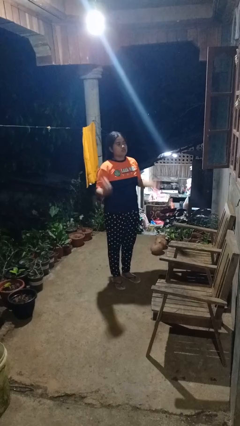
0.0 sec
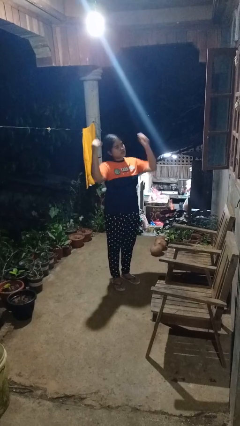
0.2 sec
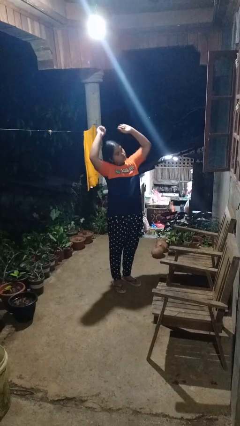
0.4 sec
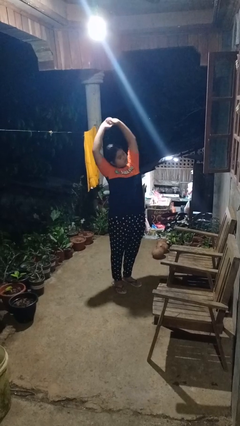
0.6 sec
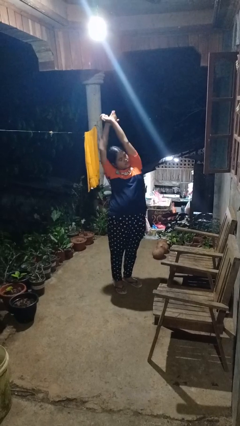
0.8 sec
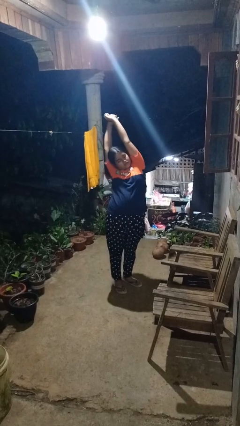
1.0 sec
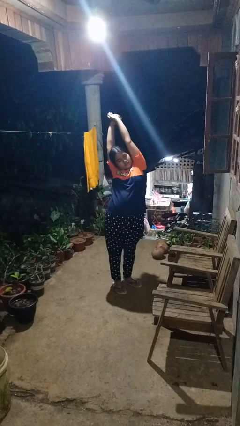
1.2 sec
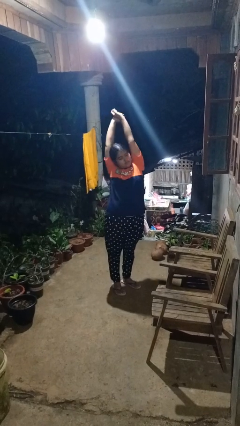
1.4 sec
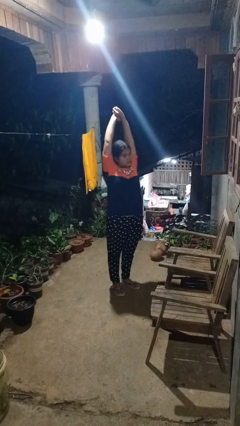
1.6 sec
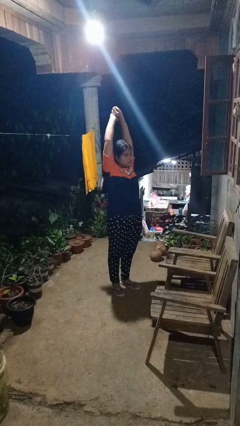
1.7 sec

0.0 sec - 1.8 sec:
person stretches arms over head

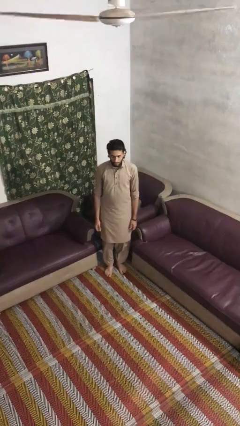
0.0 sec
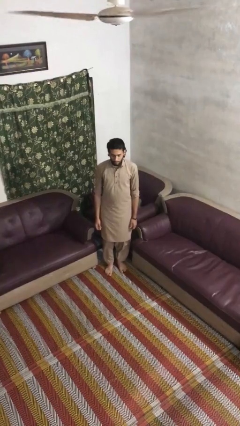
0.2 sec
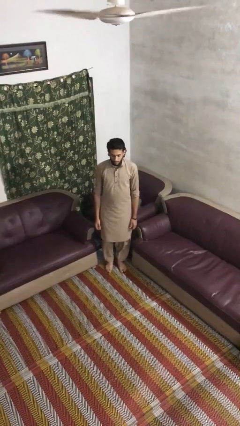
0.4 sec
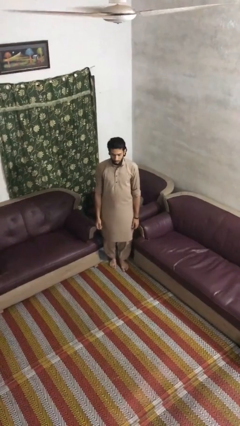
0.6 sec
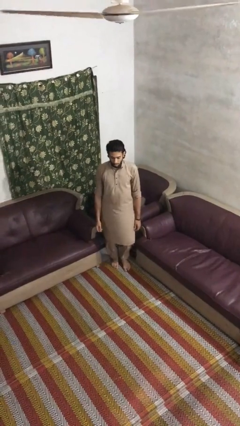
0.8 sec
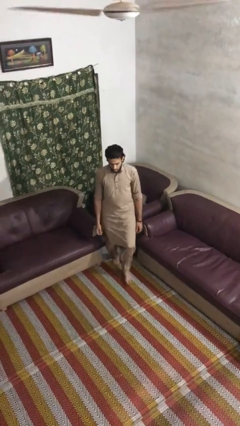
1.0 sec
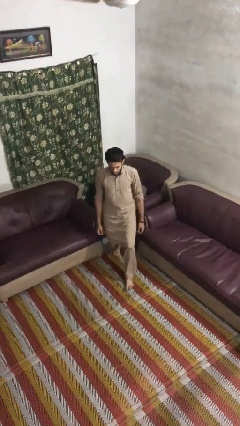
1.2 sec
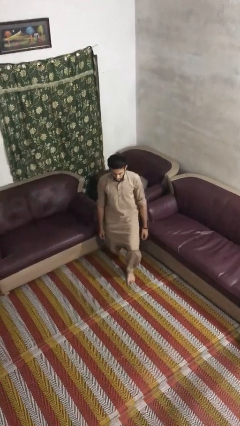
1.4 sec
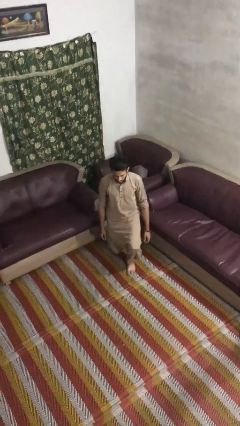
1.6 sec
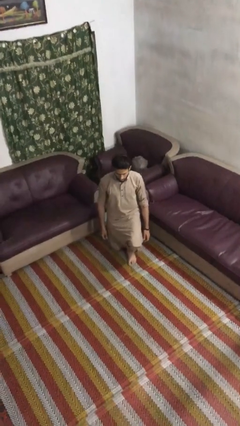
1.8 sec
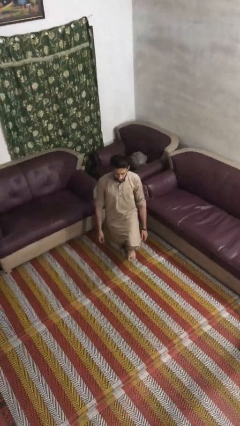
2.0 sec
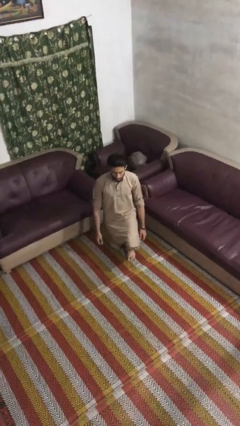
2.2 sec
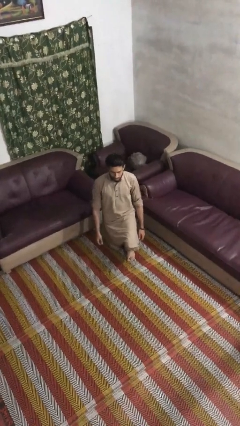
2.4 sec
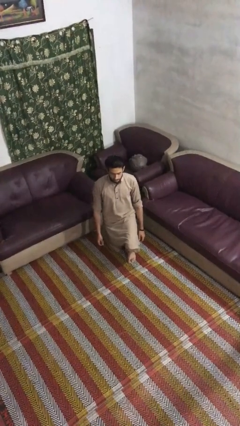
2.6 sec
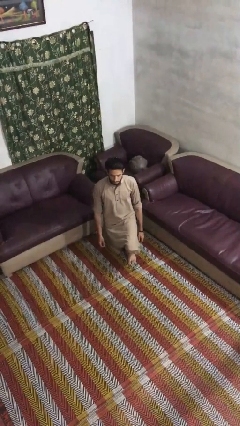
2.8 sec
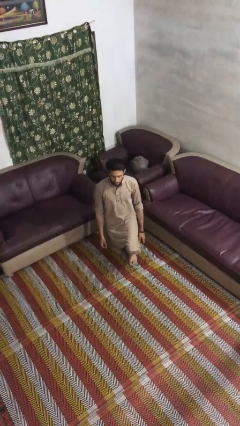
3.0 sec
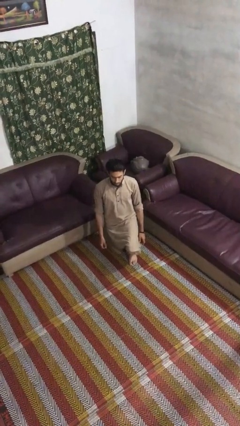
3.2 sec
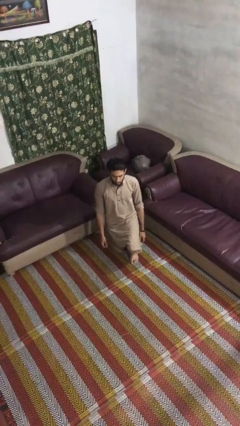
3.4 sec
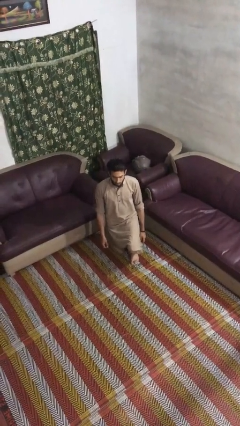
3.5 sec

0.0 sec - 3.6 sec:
person kneels

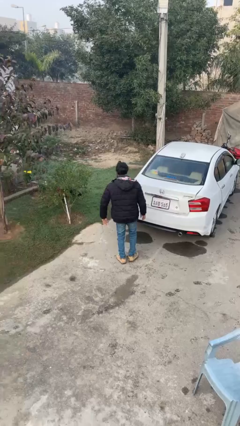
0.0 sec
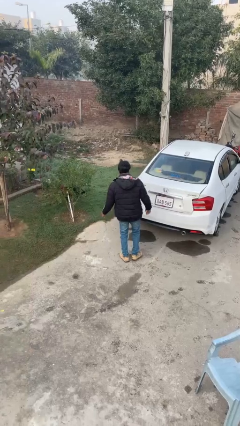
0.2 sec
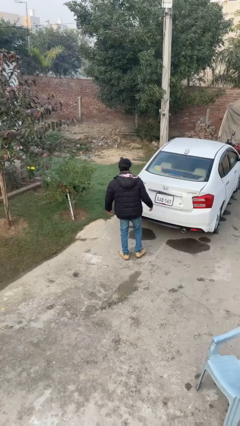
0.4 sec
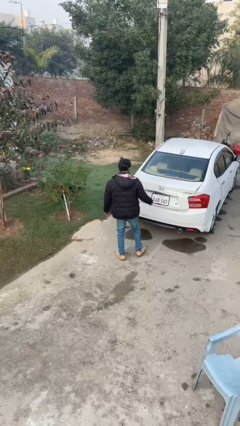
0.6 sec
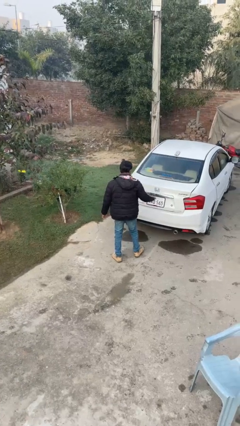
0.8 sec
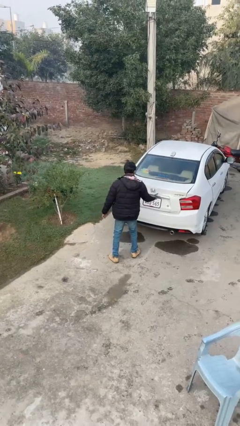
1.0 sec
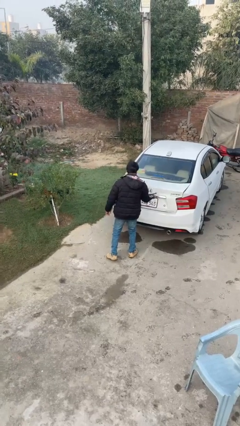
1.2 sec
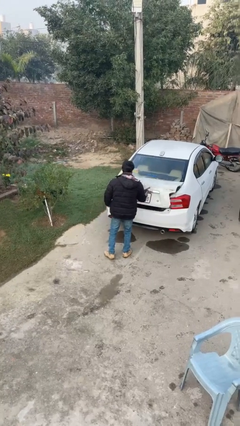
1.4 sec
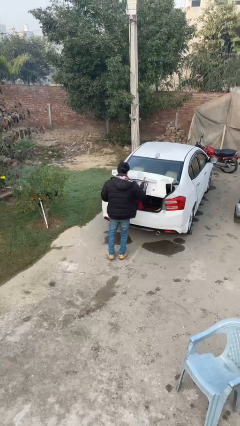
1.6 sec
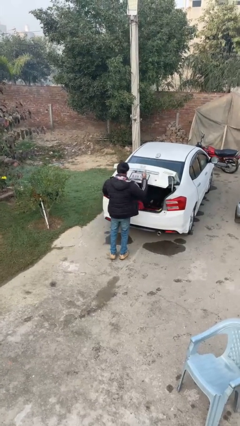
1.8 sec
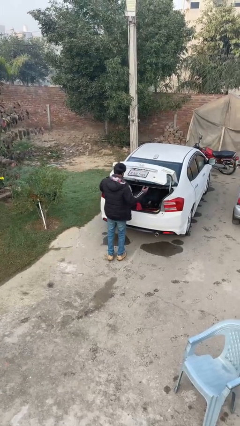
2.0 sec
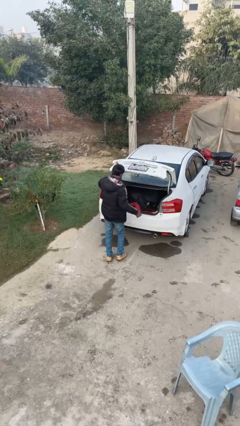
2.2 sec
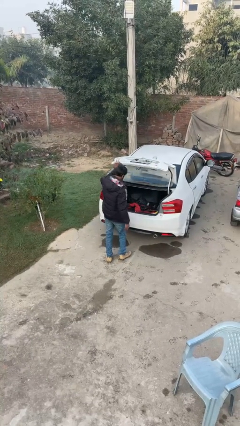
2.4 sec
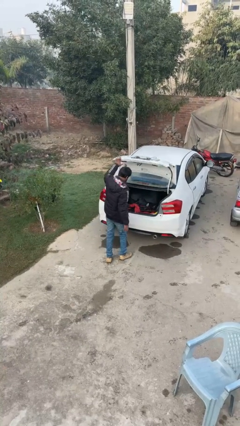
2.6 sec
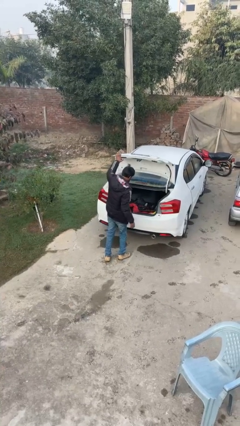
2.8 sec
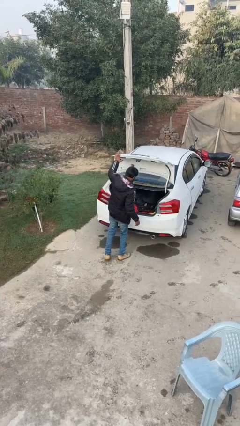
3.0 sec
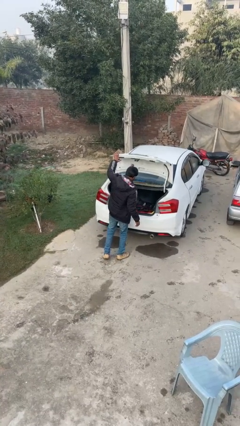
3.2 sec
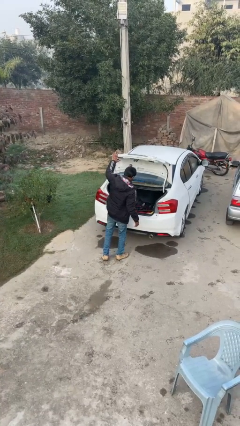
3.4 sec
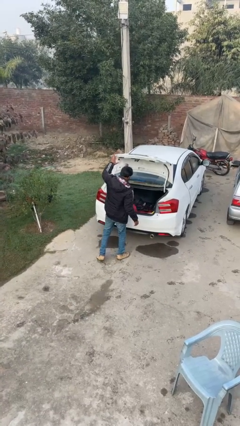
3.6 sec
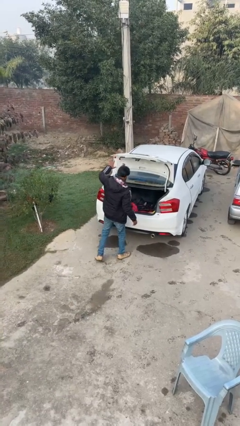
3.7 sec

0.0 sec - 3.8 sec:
person opens car trunk

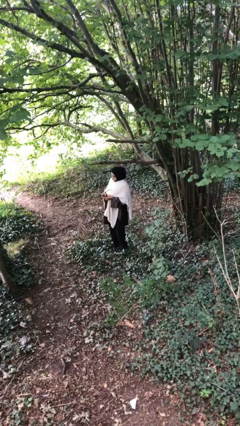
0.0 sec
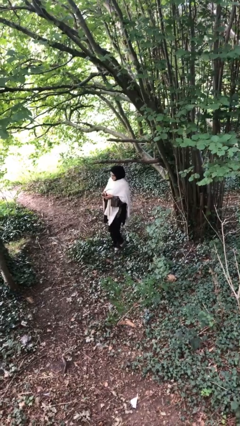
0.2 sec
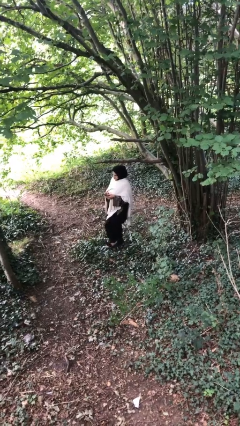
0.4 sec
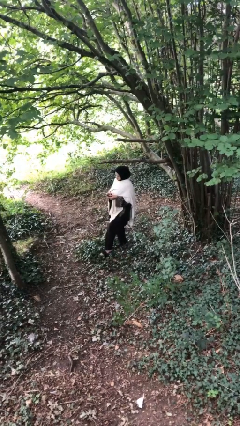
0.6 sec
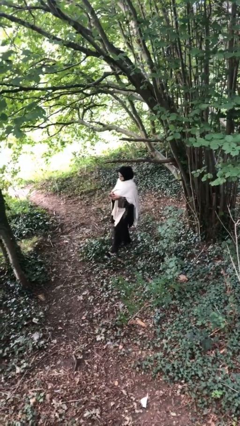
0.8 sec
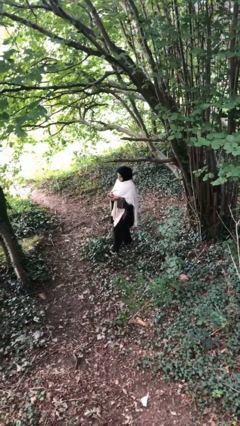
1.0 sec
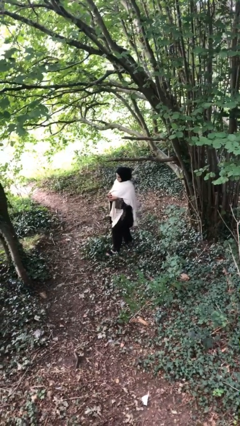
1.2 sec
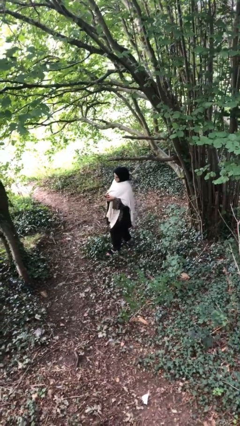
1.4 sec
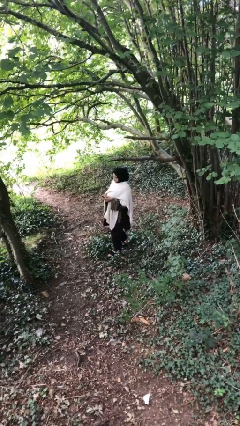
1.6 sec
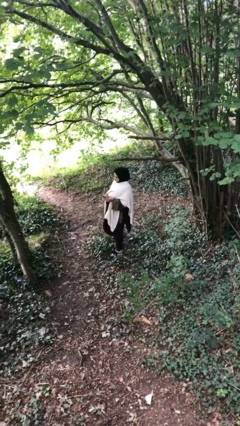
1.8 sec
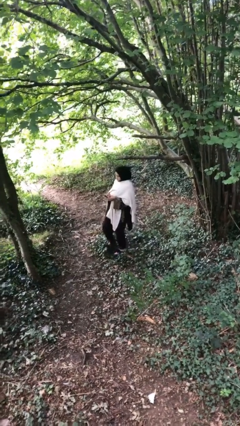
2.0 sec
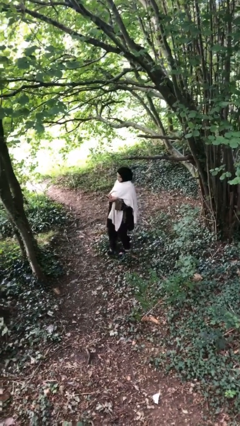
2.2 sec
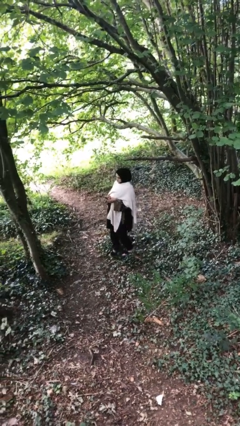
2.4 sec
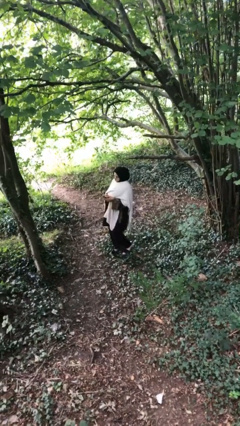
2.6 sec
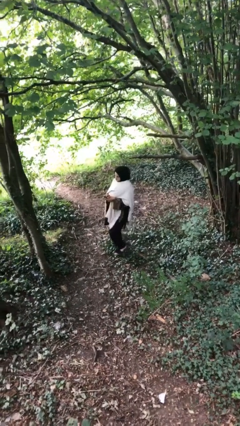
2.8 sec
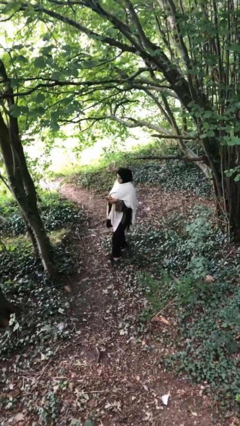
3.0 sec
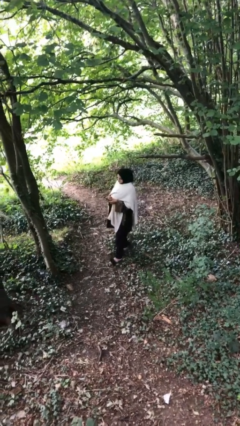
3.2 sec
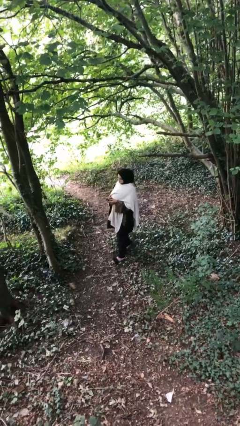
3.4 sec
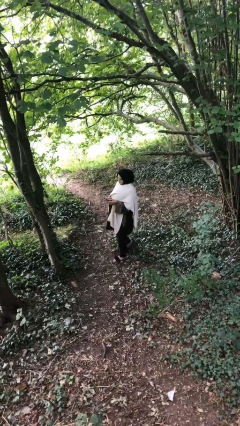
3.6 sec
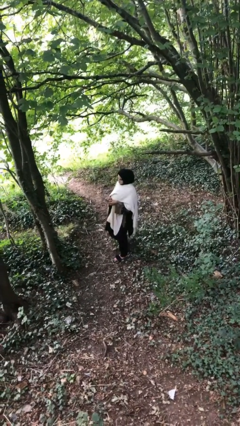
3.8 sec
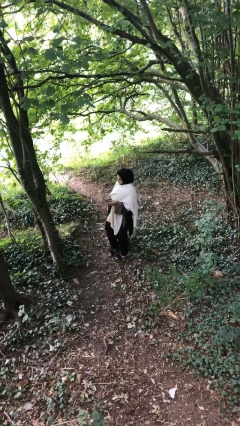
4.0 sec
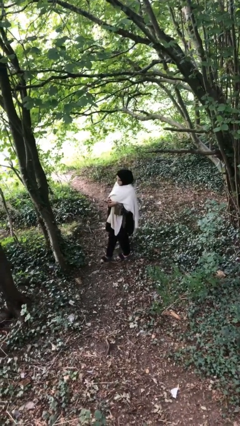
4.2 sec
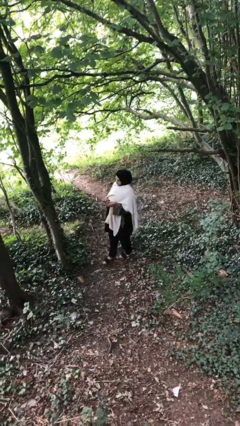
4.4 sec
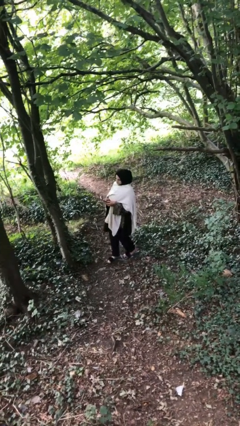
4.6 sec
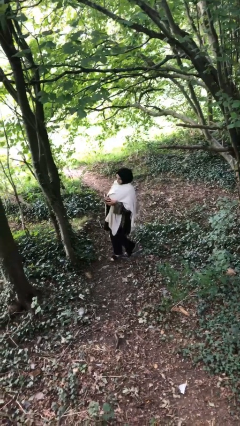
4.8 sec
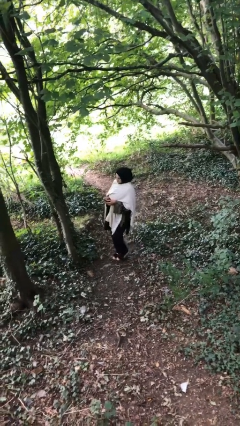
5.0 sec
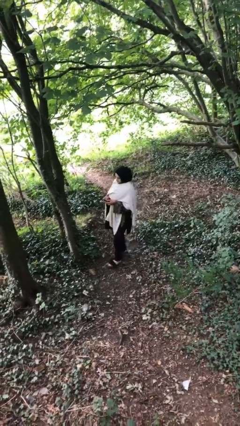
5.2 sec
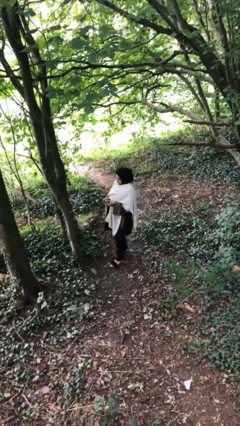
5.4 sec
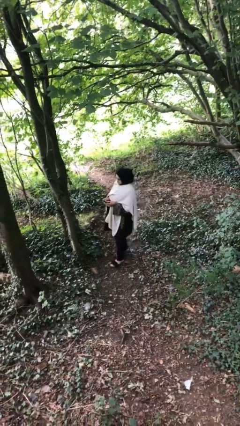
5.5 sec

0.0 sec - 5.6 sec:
person texts on phone

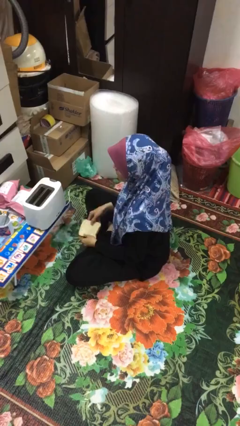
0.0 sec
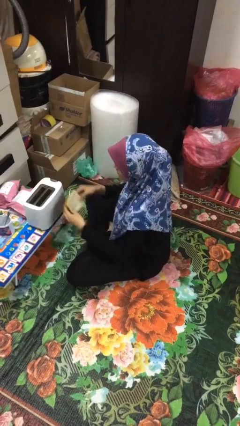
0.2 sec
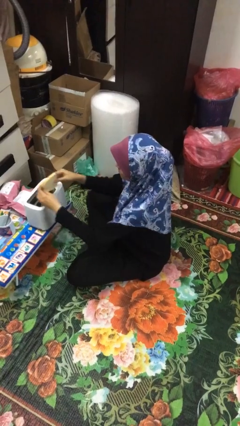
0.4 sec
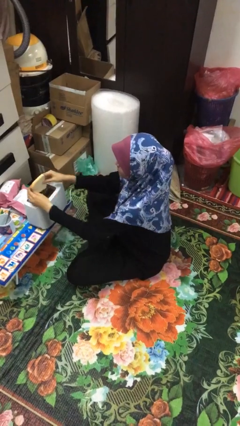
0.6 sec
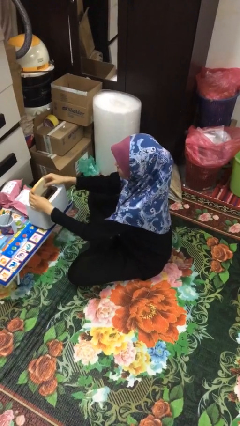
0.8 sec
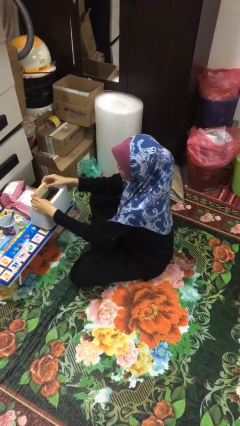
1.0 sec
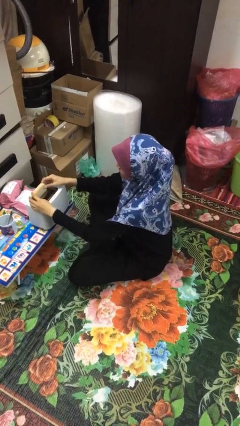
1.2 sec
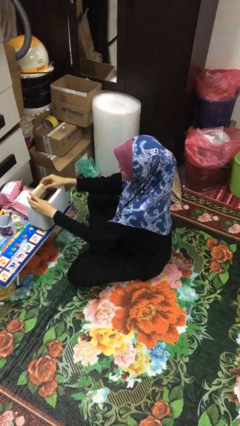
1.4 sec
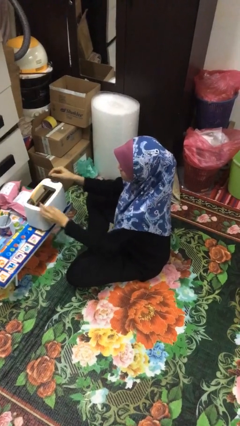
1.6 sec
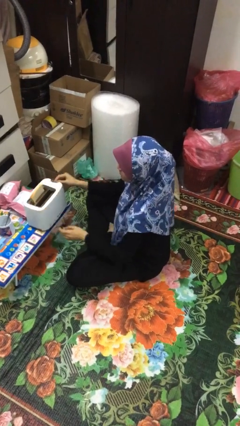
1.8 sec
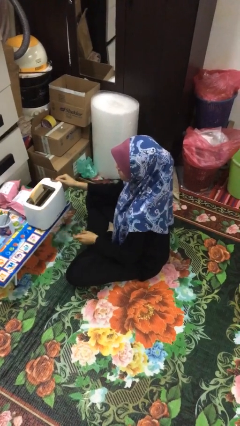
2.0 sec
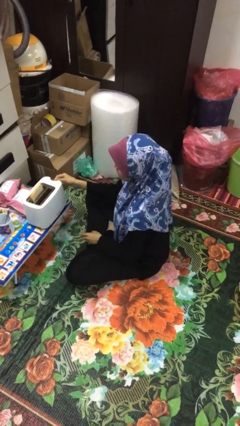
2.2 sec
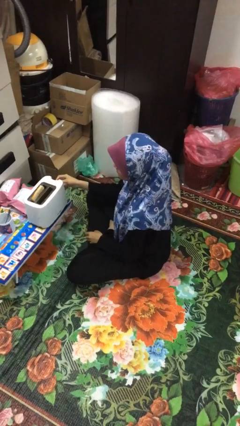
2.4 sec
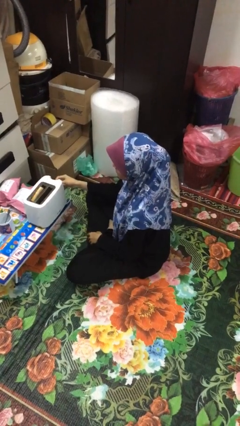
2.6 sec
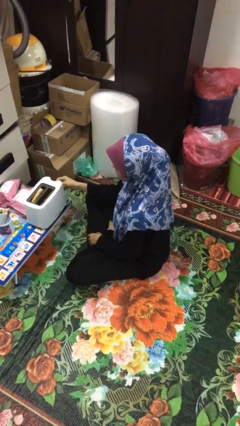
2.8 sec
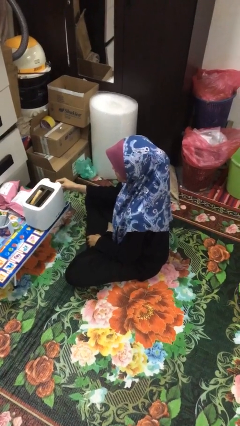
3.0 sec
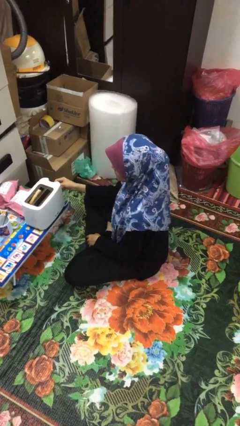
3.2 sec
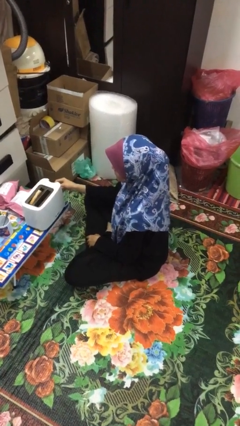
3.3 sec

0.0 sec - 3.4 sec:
person puts object into toaster
